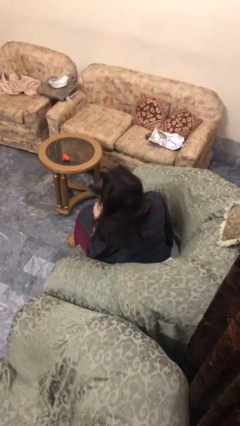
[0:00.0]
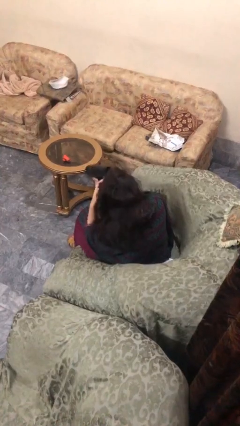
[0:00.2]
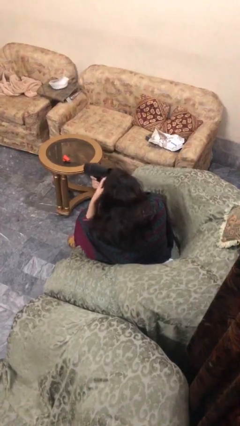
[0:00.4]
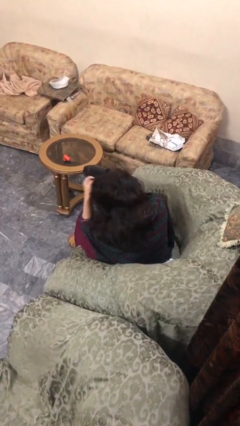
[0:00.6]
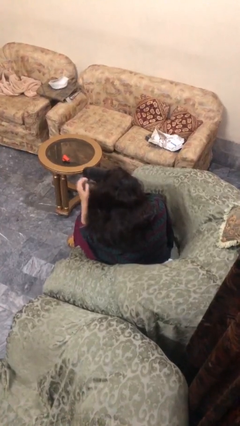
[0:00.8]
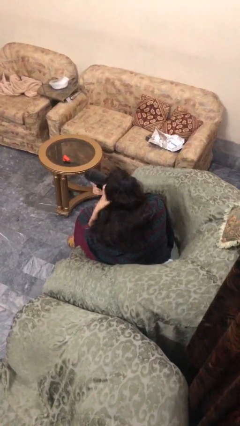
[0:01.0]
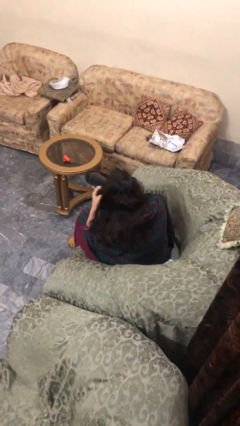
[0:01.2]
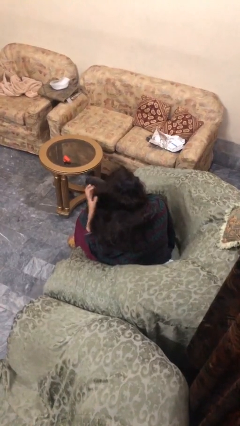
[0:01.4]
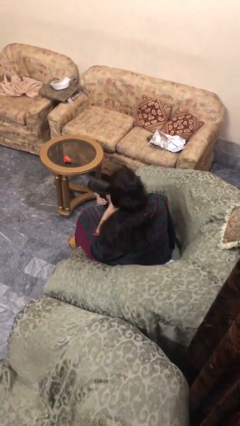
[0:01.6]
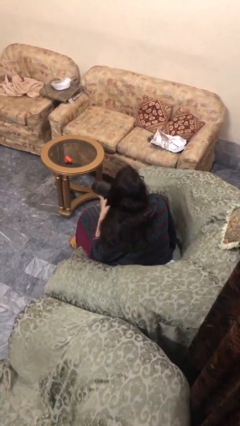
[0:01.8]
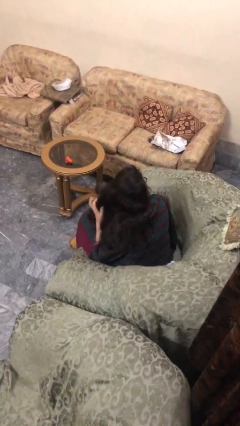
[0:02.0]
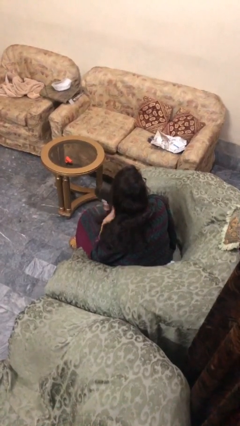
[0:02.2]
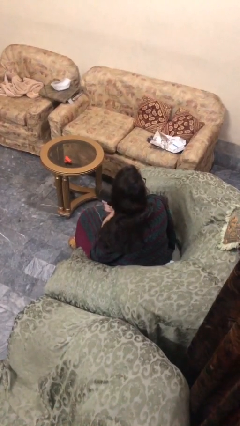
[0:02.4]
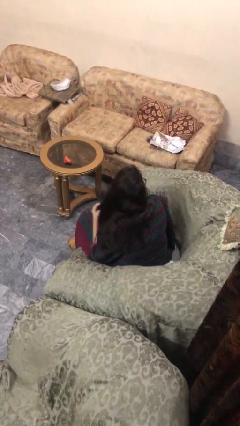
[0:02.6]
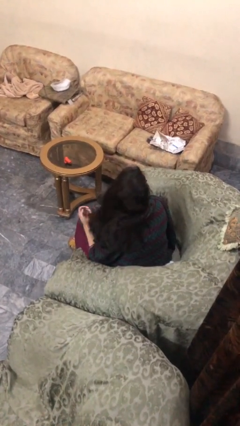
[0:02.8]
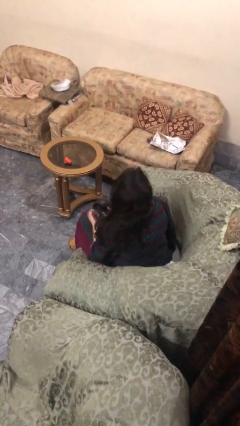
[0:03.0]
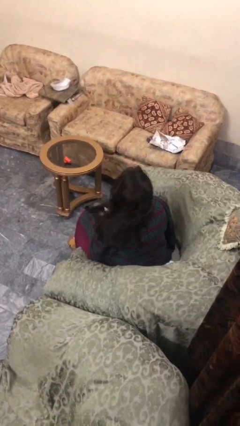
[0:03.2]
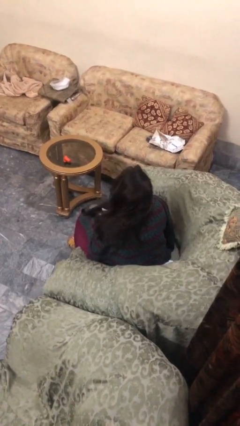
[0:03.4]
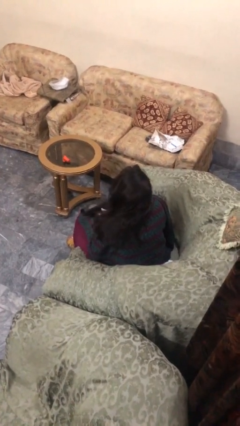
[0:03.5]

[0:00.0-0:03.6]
person dries hair with hairdryer

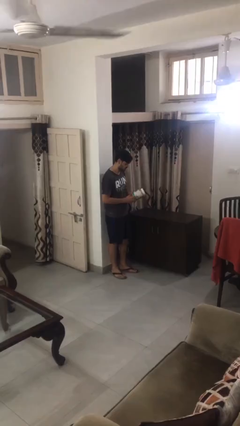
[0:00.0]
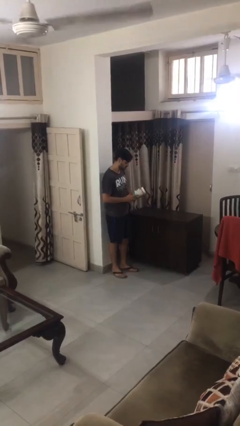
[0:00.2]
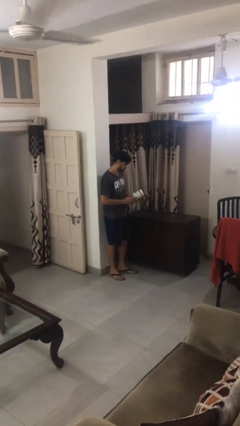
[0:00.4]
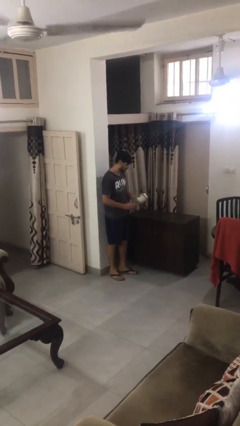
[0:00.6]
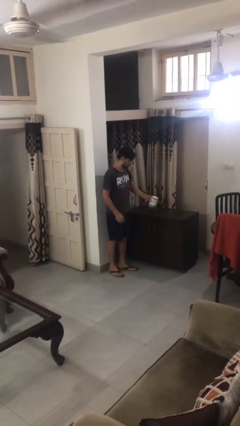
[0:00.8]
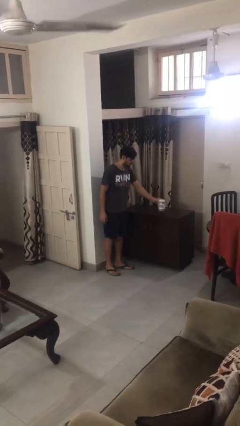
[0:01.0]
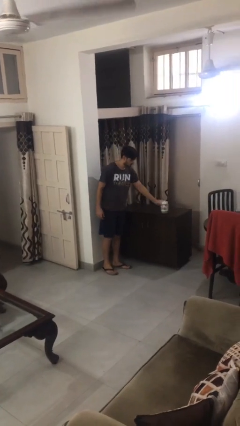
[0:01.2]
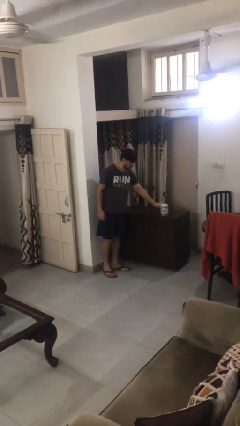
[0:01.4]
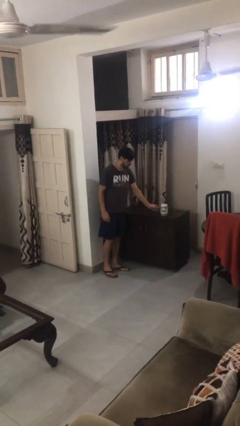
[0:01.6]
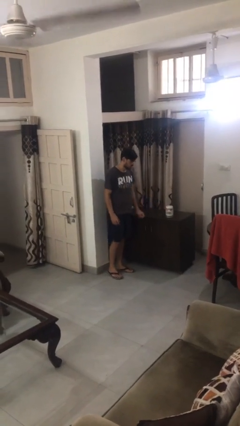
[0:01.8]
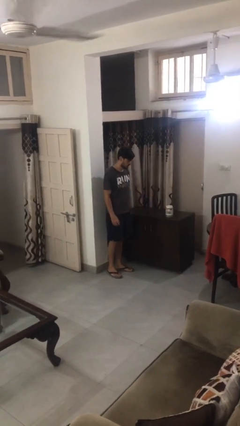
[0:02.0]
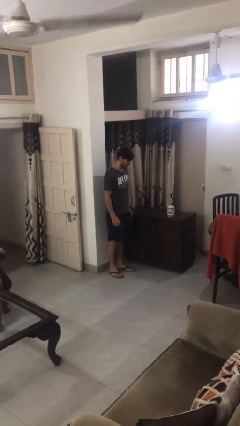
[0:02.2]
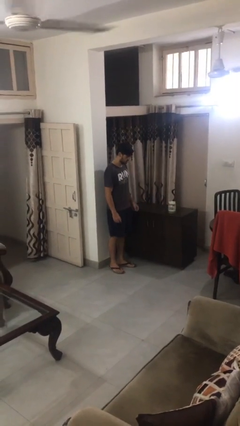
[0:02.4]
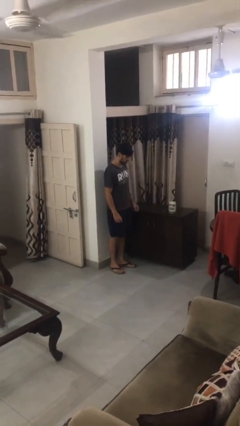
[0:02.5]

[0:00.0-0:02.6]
person puts down object on countertop

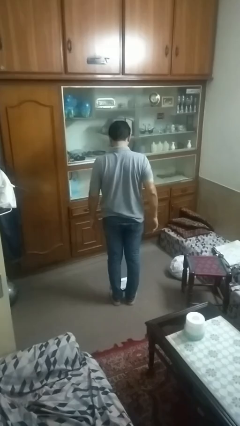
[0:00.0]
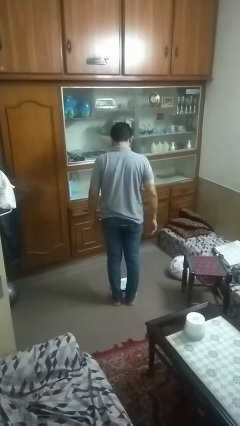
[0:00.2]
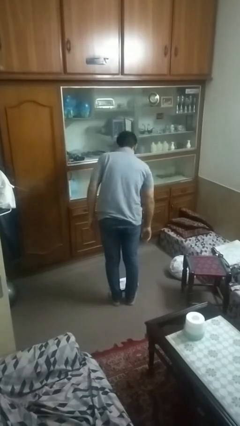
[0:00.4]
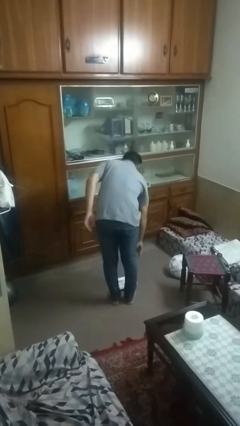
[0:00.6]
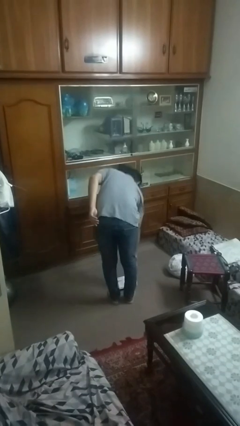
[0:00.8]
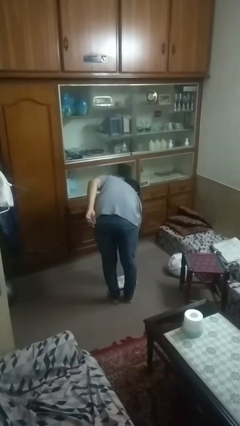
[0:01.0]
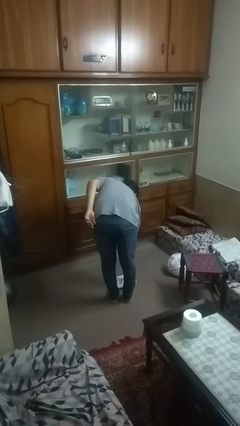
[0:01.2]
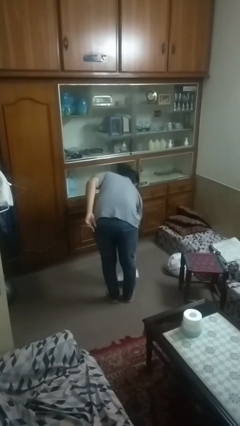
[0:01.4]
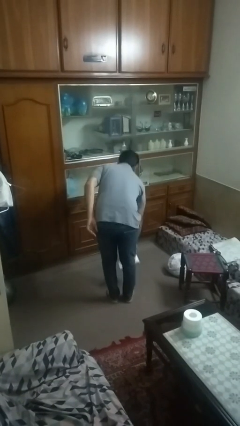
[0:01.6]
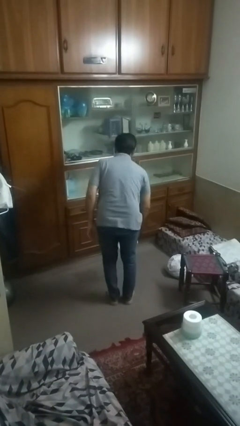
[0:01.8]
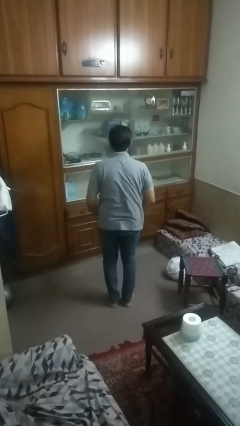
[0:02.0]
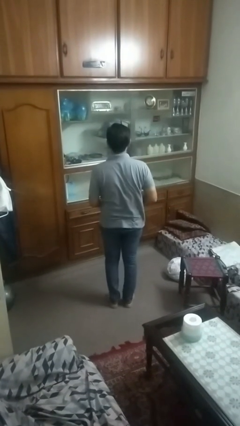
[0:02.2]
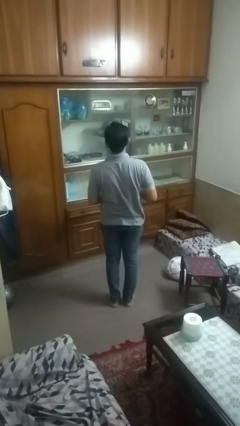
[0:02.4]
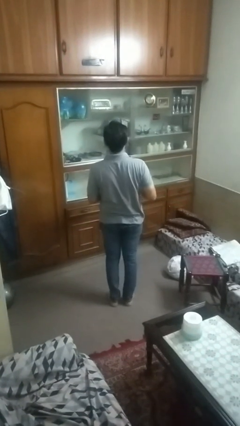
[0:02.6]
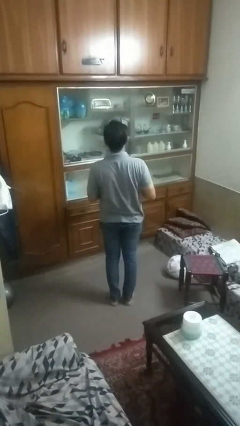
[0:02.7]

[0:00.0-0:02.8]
person picks up object from floor

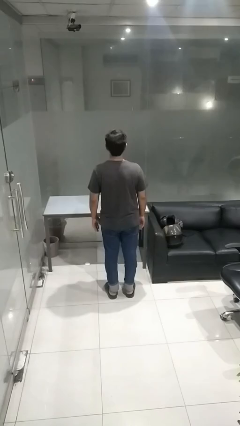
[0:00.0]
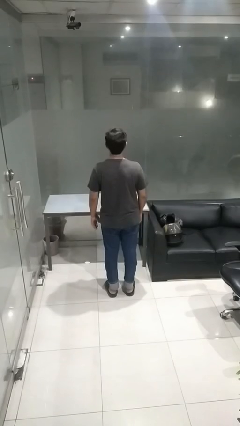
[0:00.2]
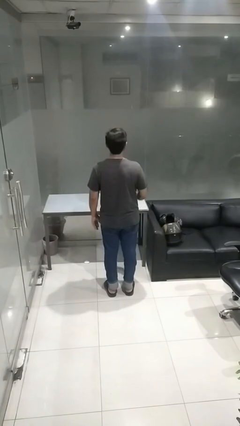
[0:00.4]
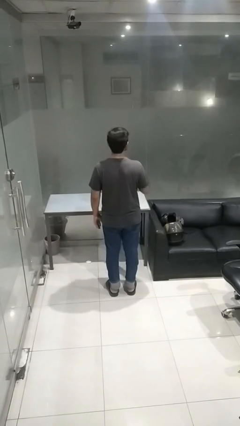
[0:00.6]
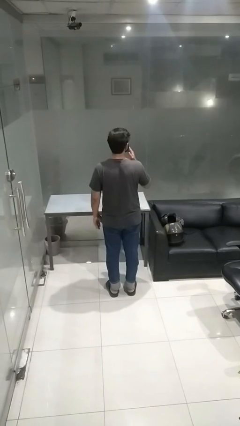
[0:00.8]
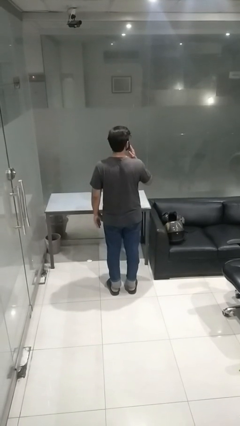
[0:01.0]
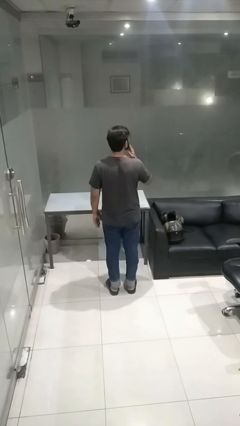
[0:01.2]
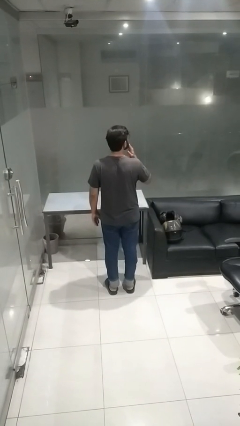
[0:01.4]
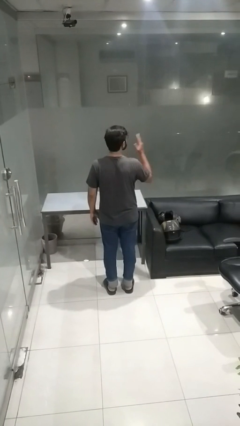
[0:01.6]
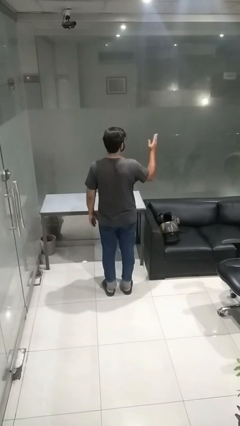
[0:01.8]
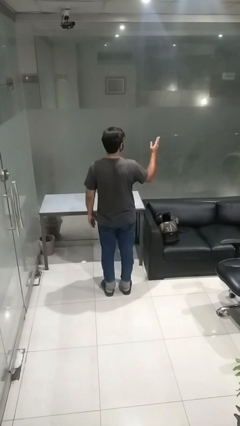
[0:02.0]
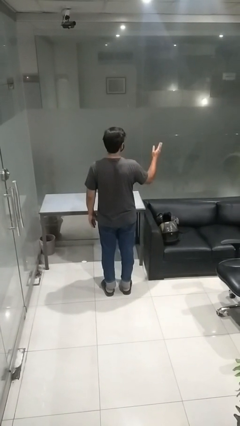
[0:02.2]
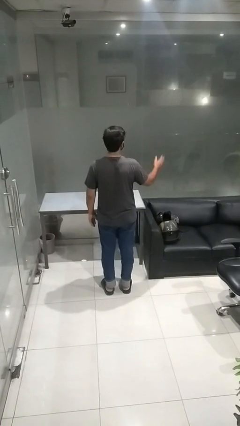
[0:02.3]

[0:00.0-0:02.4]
person gestures blow kiss

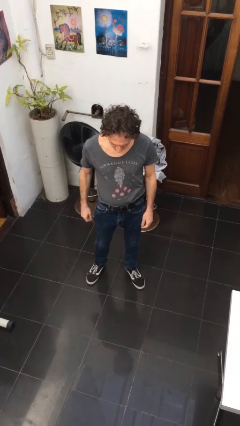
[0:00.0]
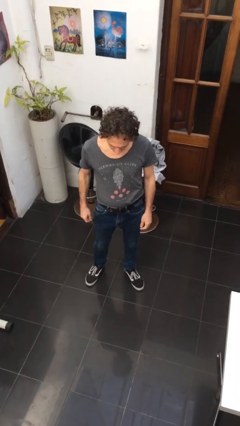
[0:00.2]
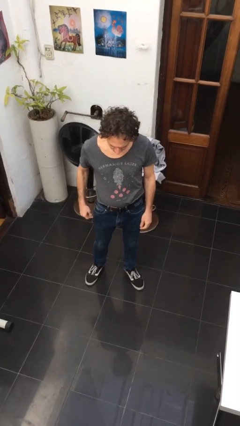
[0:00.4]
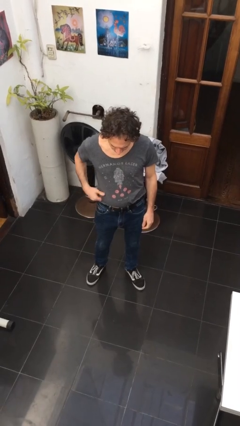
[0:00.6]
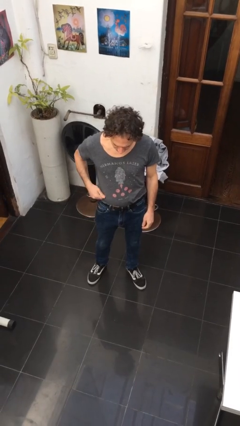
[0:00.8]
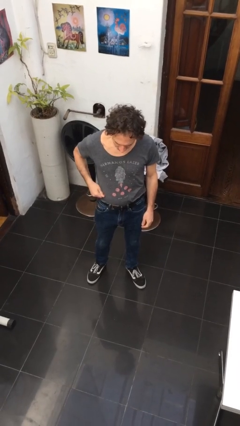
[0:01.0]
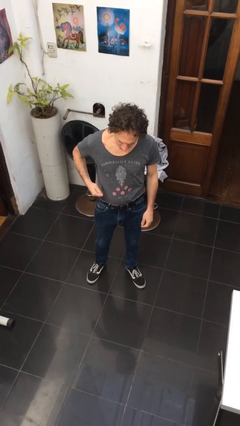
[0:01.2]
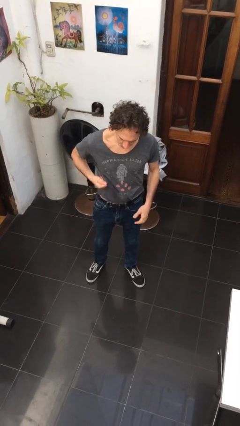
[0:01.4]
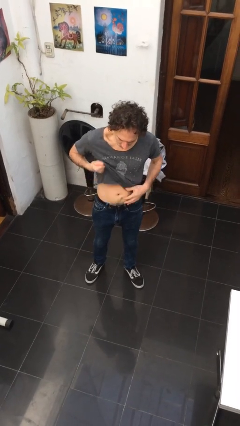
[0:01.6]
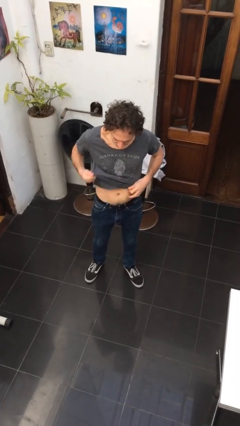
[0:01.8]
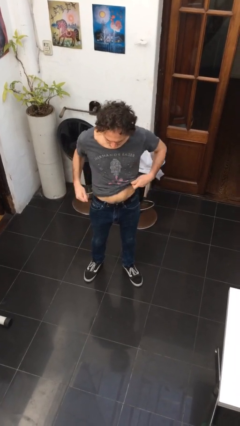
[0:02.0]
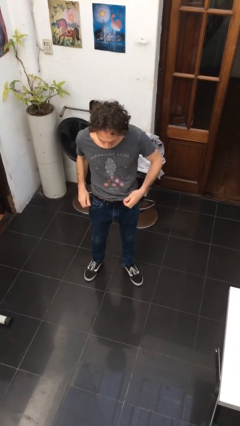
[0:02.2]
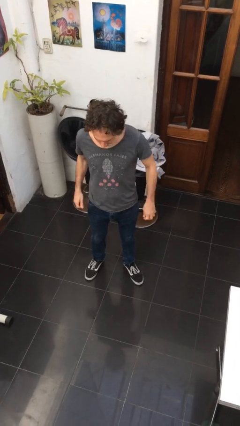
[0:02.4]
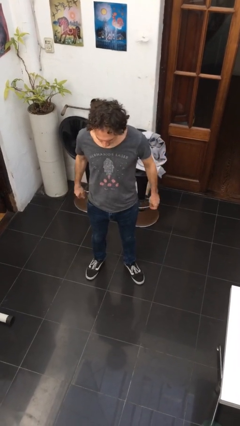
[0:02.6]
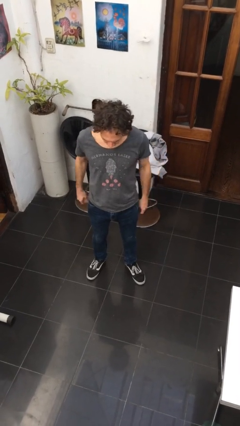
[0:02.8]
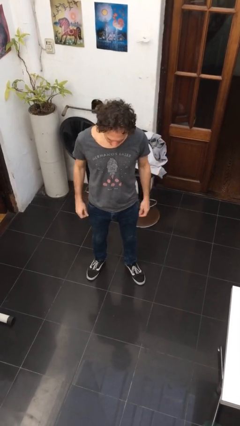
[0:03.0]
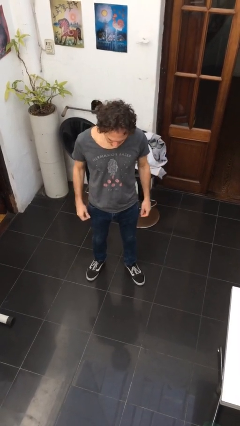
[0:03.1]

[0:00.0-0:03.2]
person untucks shirt

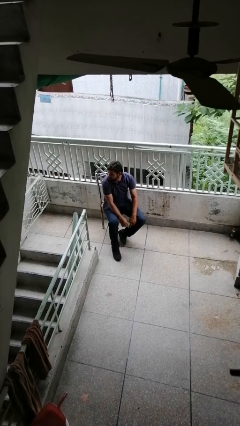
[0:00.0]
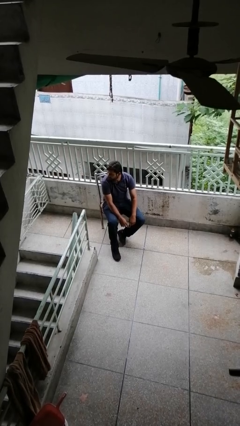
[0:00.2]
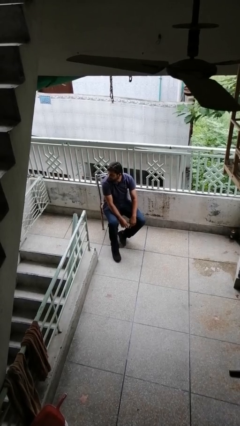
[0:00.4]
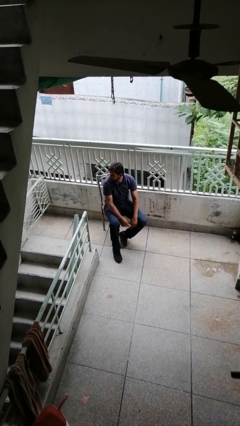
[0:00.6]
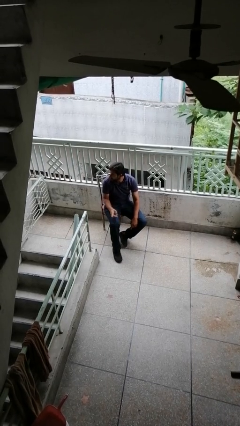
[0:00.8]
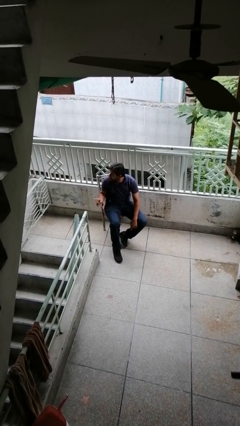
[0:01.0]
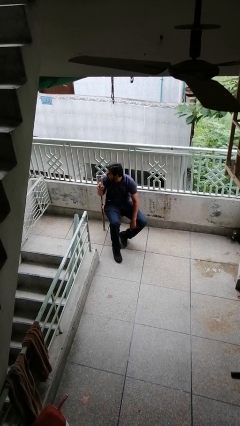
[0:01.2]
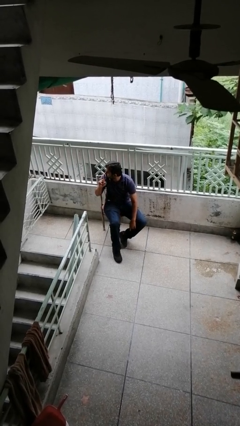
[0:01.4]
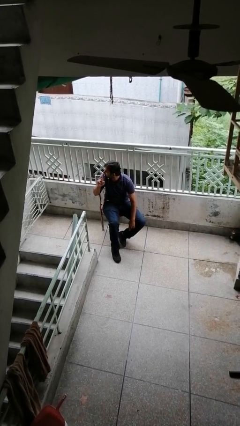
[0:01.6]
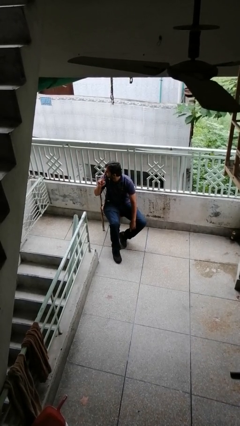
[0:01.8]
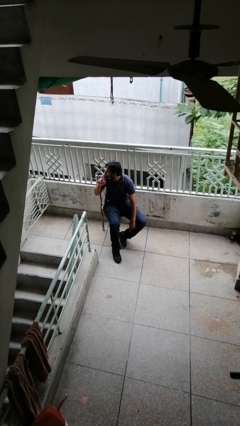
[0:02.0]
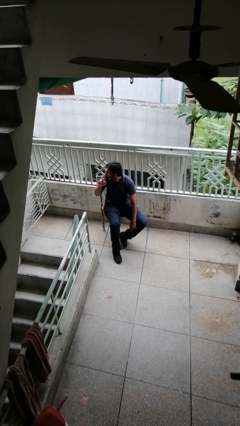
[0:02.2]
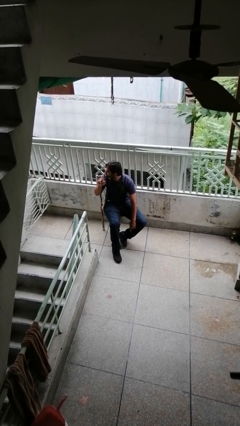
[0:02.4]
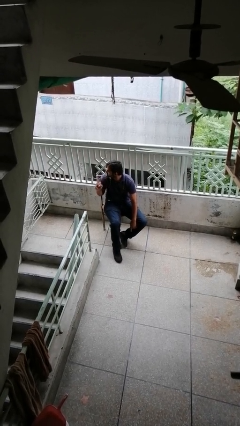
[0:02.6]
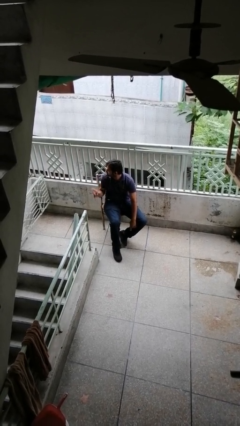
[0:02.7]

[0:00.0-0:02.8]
person gestures be quiet
